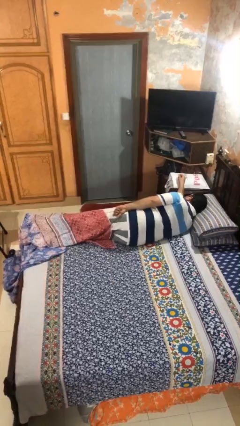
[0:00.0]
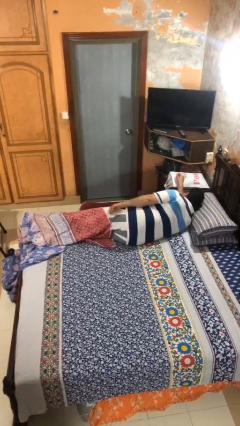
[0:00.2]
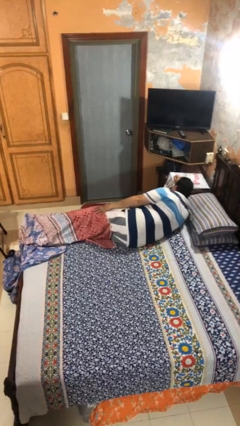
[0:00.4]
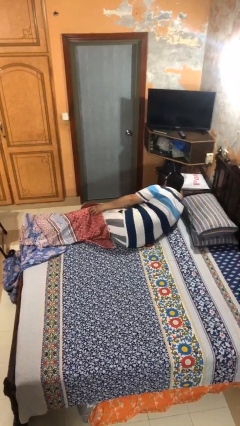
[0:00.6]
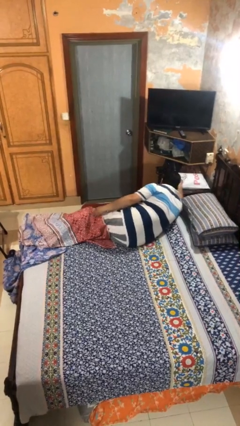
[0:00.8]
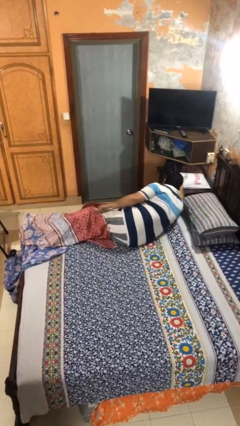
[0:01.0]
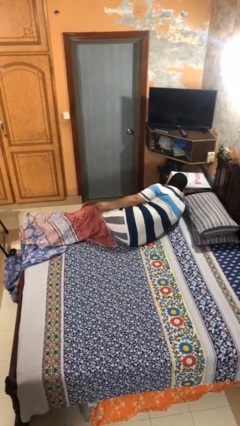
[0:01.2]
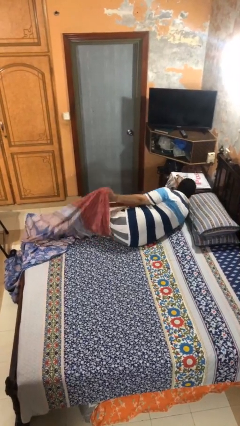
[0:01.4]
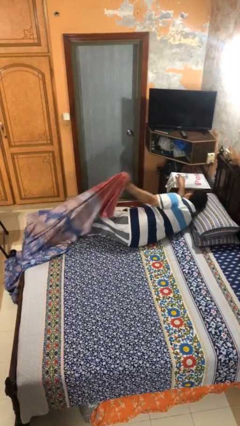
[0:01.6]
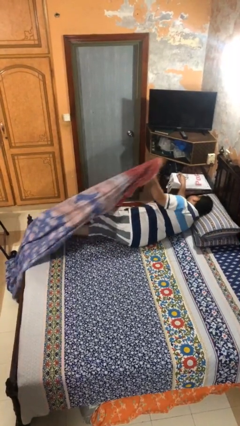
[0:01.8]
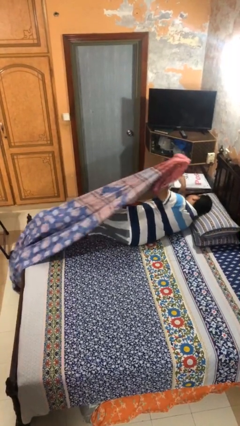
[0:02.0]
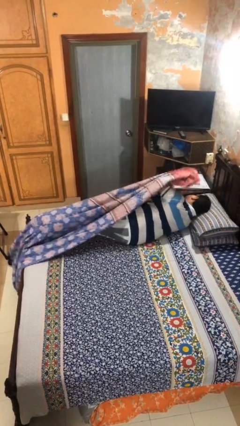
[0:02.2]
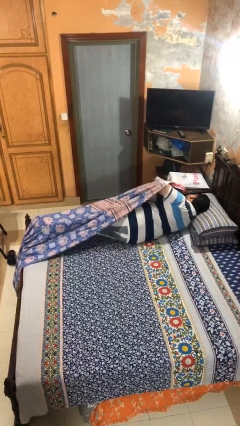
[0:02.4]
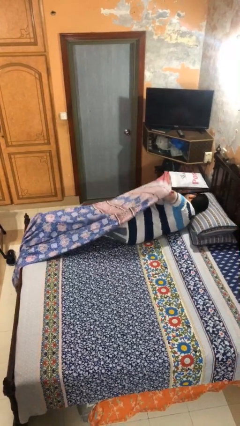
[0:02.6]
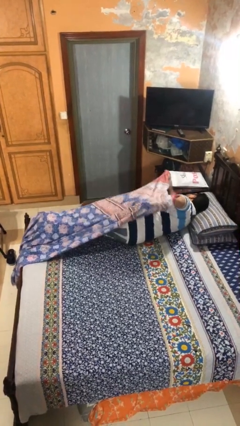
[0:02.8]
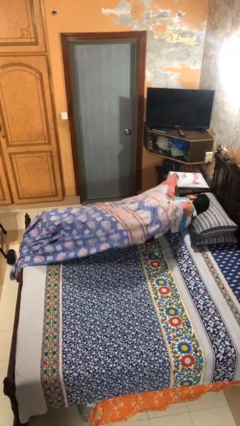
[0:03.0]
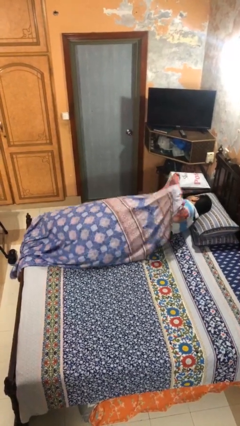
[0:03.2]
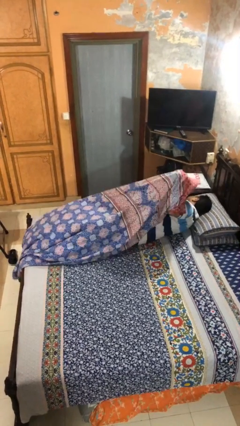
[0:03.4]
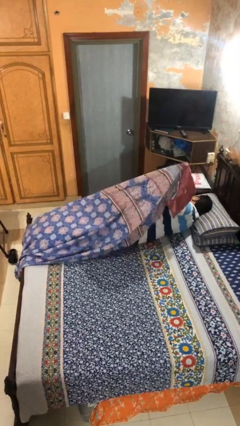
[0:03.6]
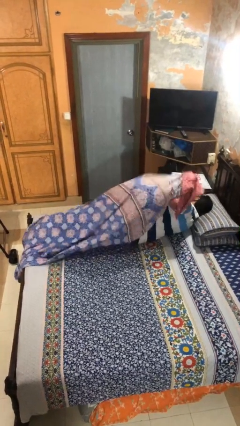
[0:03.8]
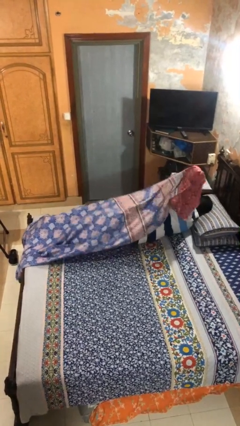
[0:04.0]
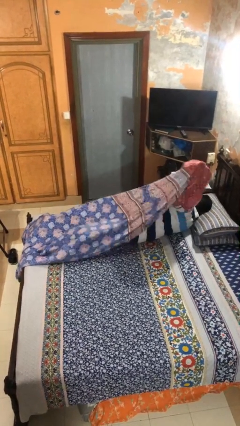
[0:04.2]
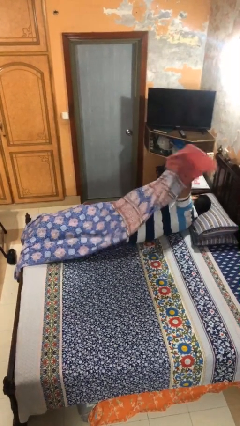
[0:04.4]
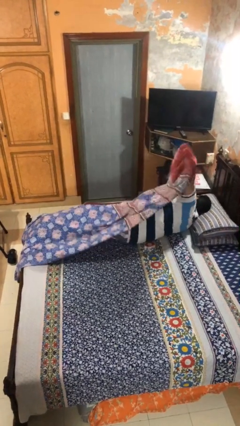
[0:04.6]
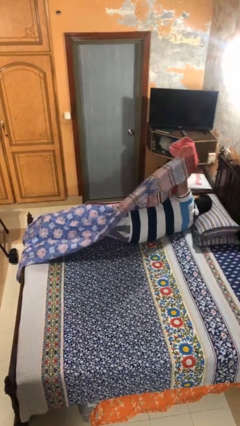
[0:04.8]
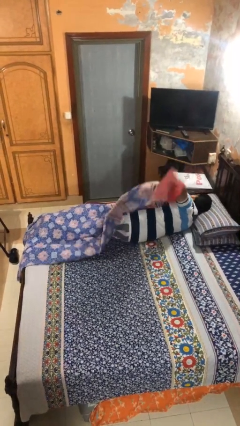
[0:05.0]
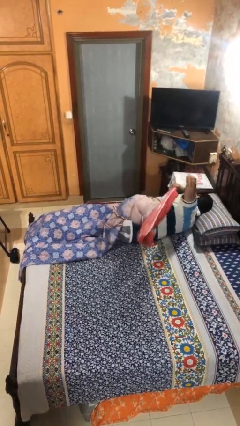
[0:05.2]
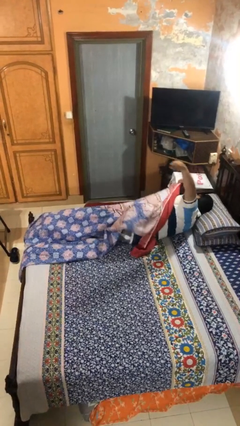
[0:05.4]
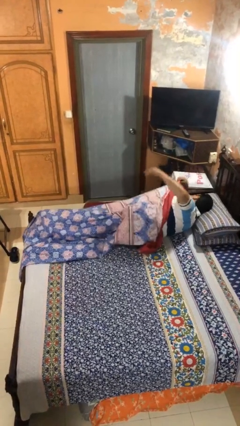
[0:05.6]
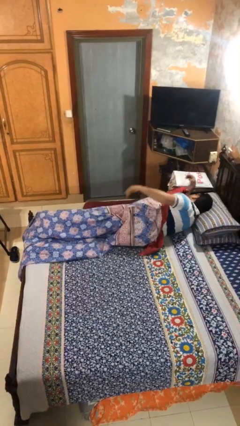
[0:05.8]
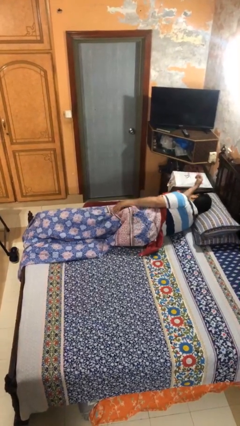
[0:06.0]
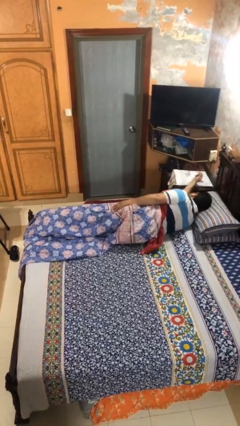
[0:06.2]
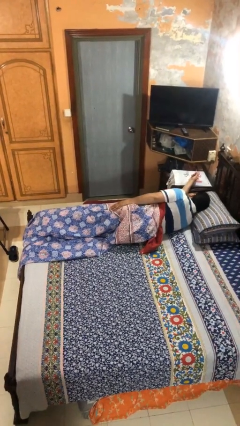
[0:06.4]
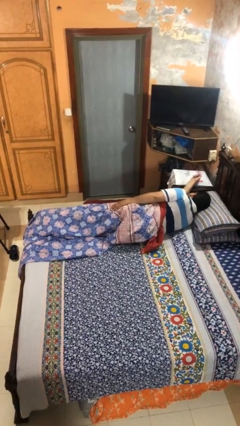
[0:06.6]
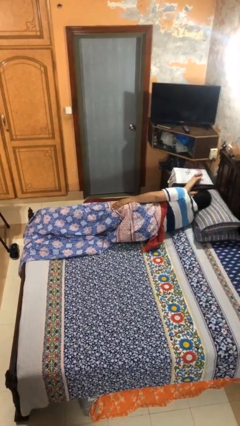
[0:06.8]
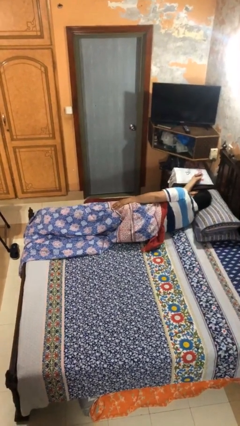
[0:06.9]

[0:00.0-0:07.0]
person covers with bedsheets

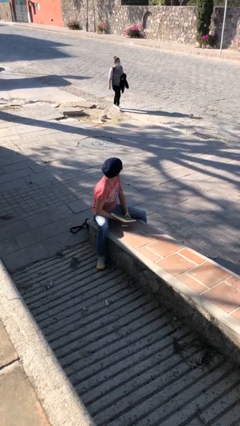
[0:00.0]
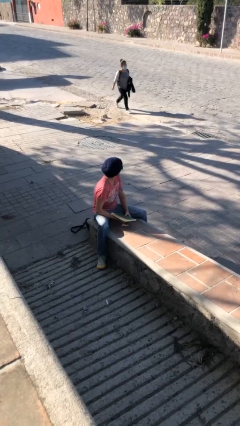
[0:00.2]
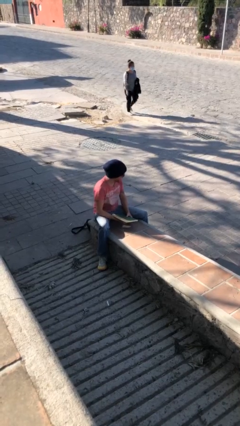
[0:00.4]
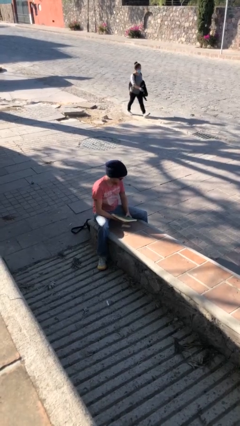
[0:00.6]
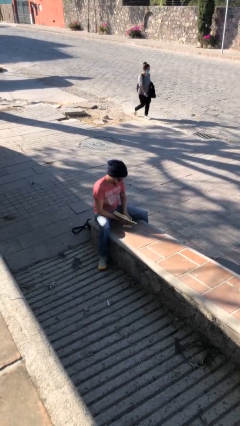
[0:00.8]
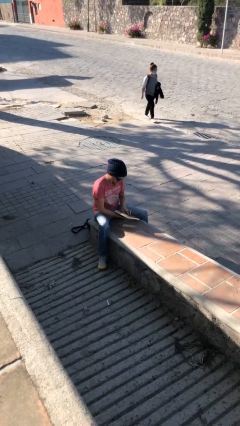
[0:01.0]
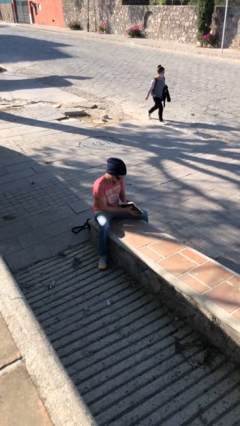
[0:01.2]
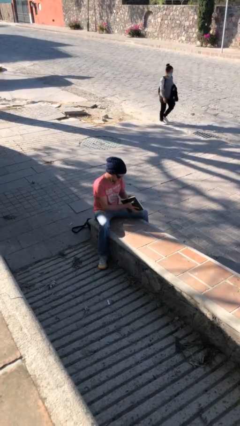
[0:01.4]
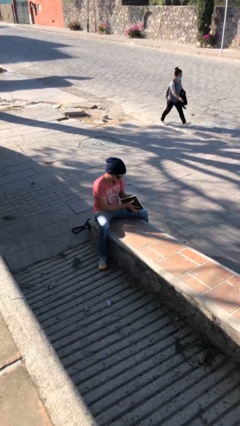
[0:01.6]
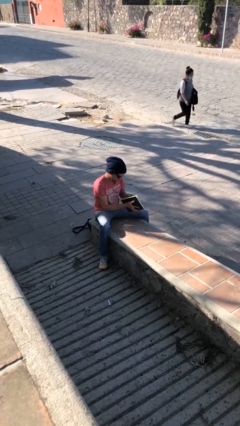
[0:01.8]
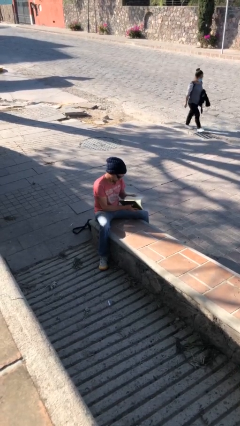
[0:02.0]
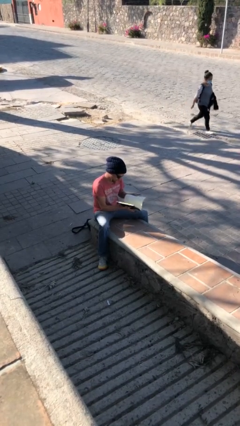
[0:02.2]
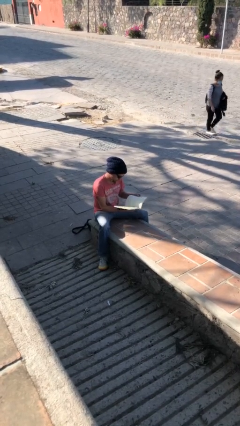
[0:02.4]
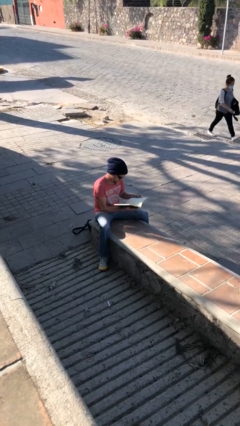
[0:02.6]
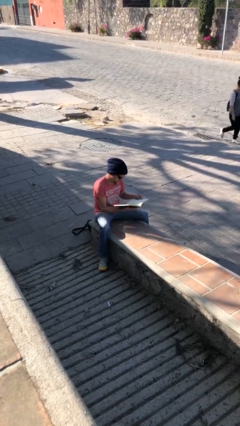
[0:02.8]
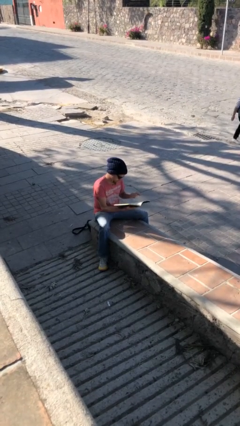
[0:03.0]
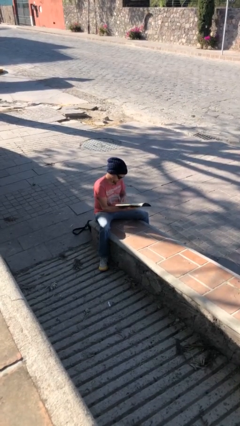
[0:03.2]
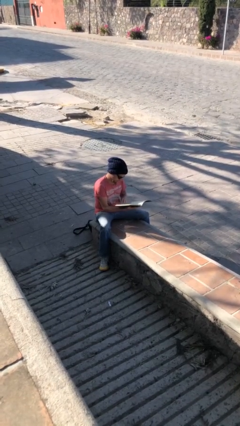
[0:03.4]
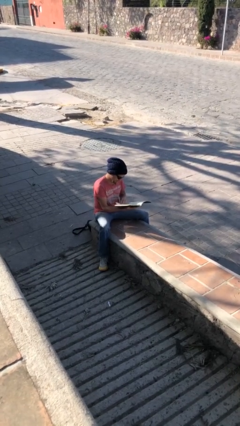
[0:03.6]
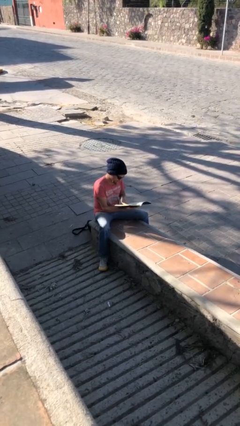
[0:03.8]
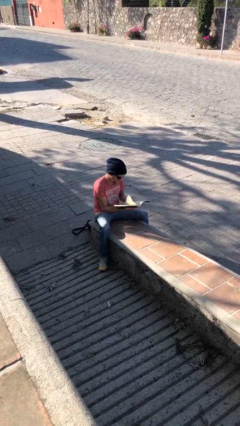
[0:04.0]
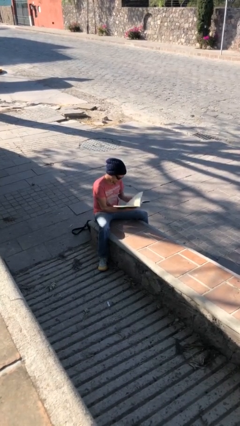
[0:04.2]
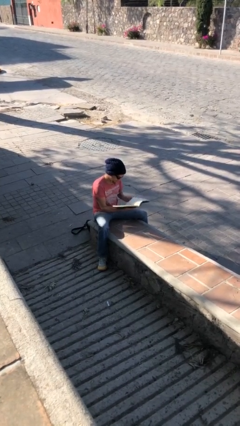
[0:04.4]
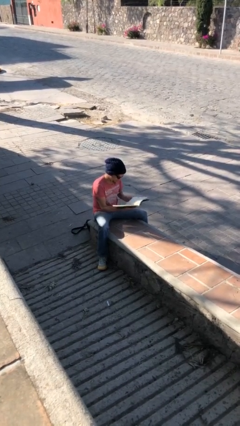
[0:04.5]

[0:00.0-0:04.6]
person reads document

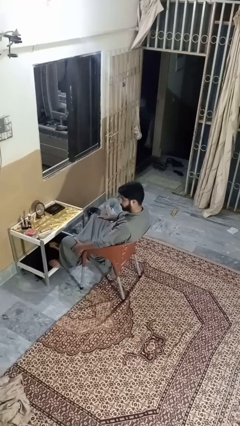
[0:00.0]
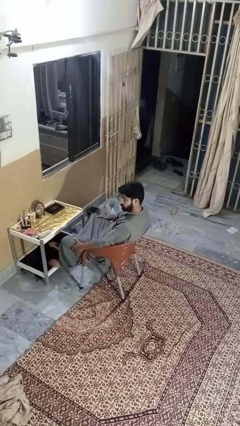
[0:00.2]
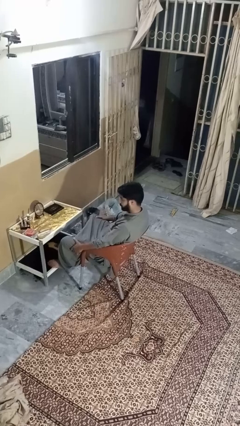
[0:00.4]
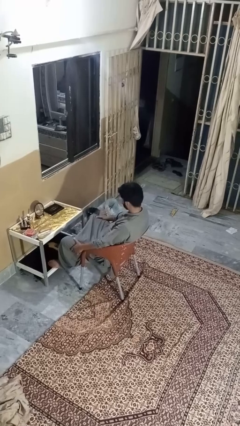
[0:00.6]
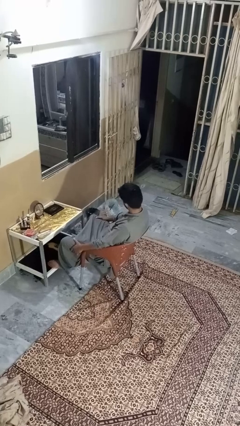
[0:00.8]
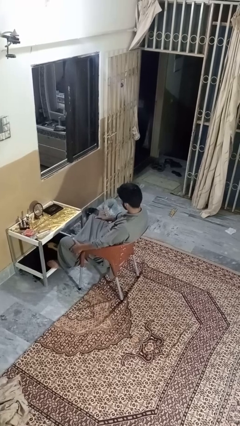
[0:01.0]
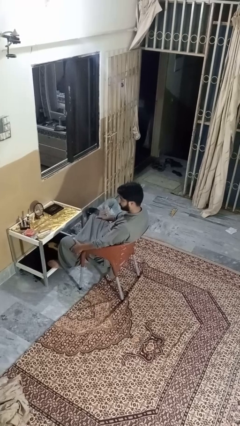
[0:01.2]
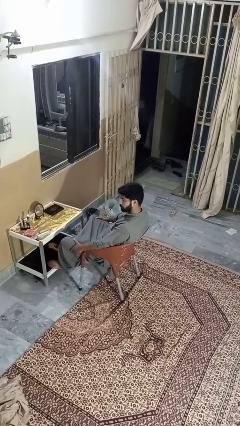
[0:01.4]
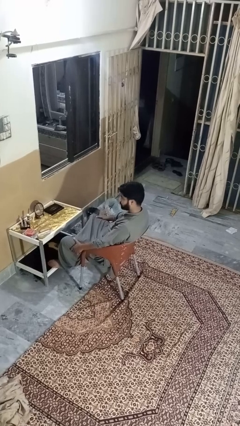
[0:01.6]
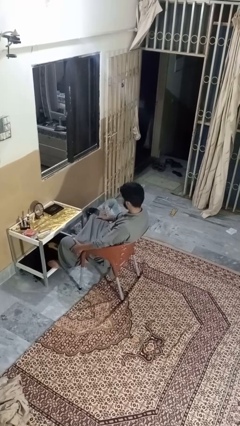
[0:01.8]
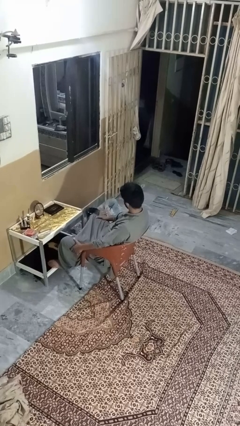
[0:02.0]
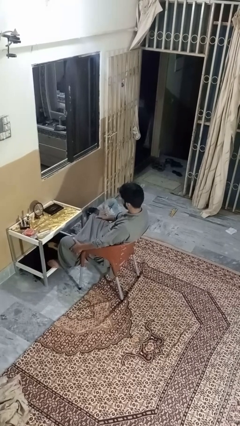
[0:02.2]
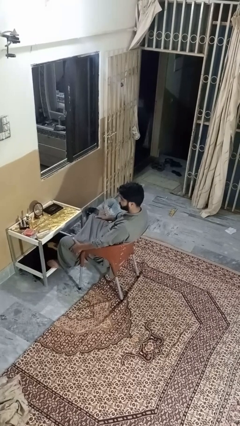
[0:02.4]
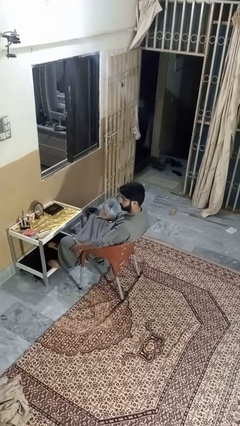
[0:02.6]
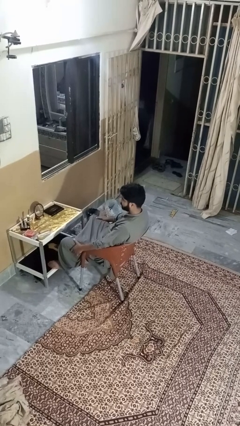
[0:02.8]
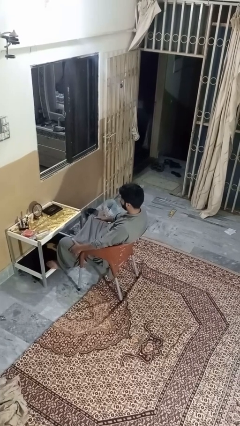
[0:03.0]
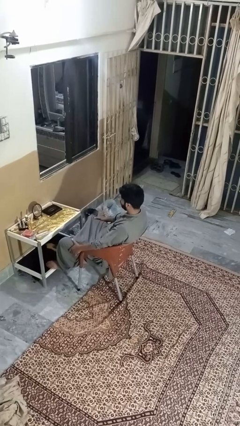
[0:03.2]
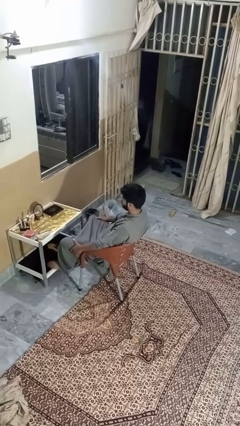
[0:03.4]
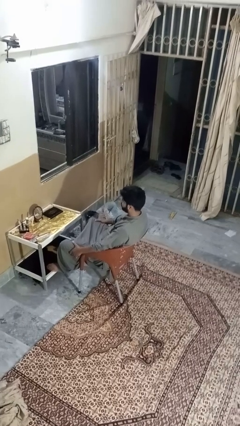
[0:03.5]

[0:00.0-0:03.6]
person shakes head

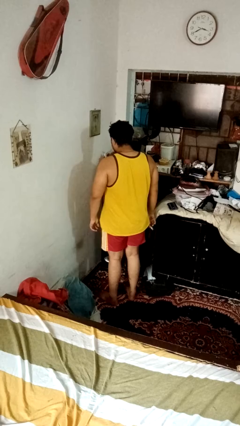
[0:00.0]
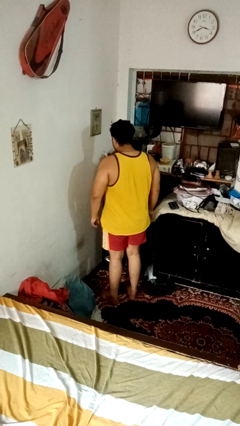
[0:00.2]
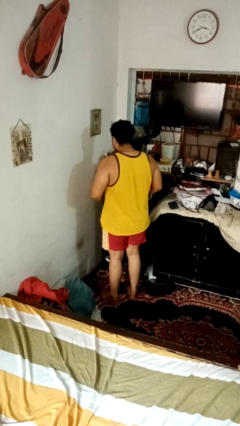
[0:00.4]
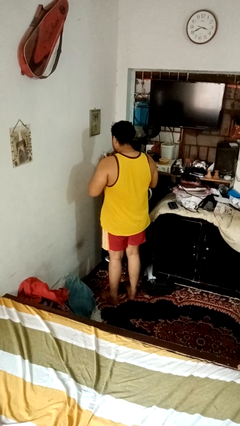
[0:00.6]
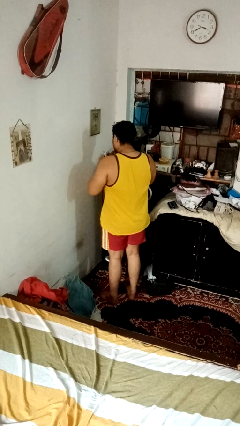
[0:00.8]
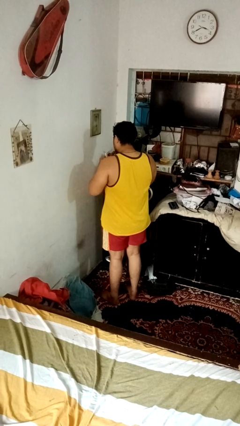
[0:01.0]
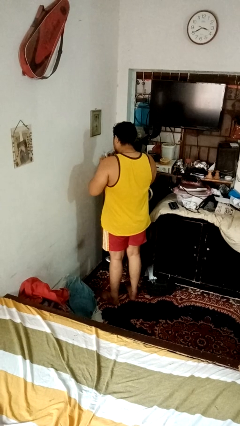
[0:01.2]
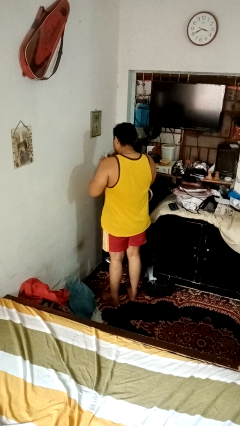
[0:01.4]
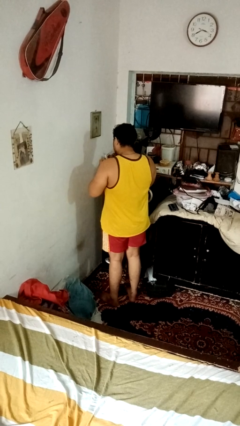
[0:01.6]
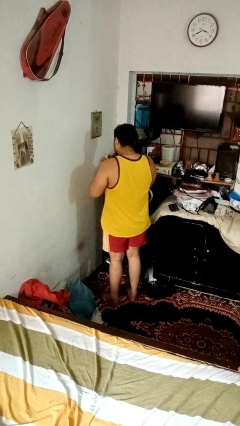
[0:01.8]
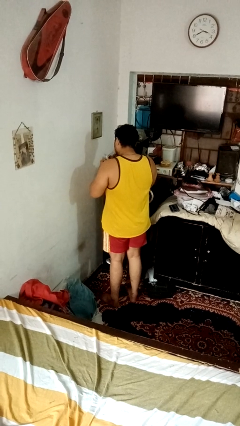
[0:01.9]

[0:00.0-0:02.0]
person clips fingernails

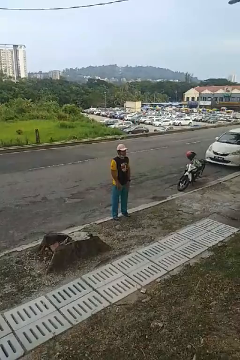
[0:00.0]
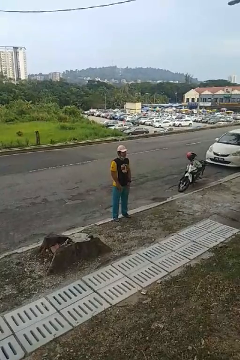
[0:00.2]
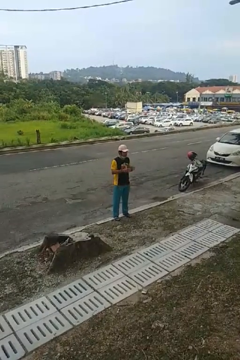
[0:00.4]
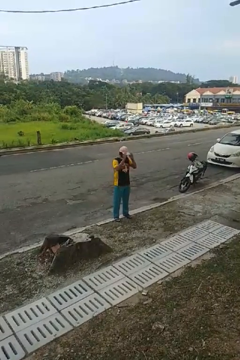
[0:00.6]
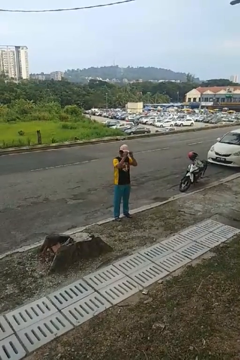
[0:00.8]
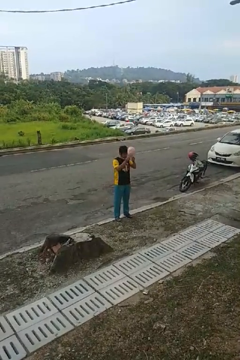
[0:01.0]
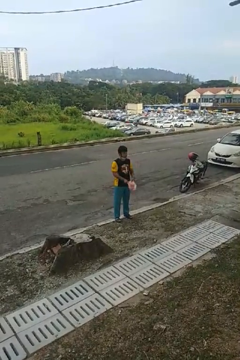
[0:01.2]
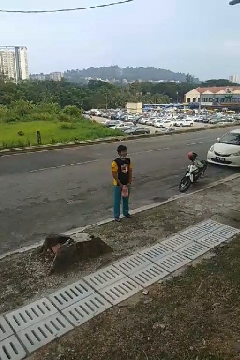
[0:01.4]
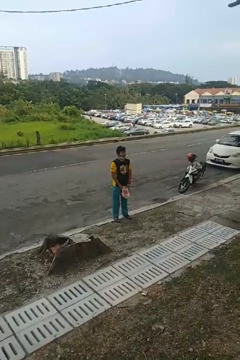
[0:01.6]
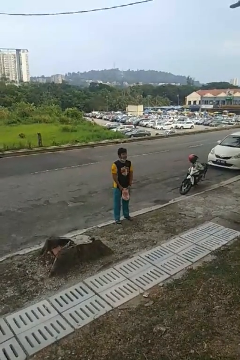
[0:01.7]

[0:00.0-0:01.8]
person takes off hat
